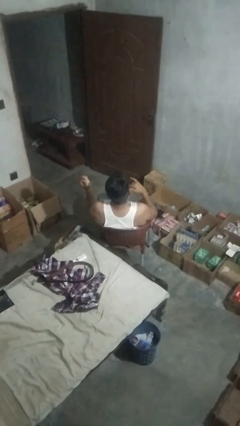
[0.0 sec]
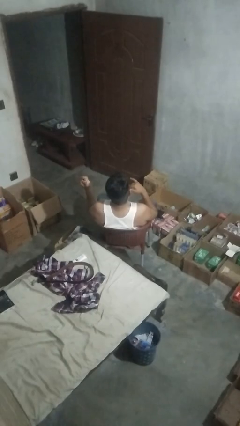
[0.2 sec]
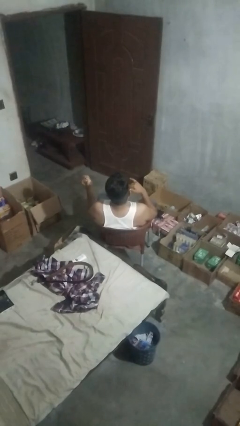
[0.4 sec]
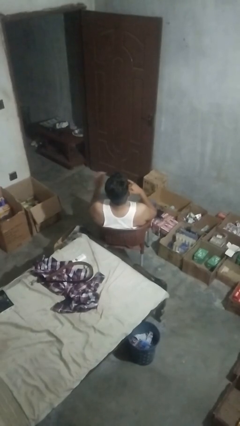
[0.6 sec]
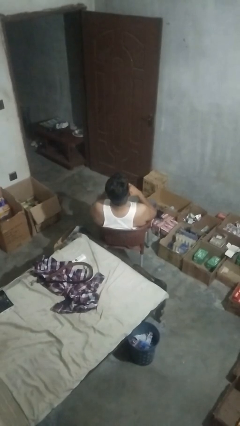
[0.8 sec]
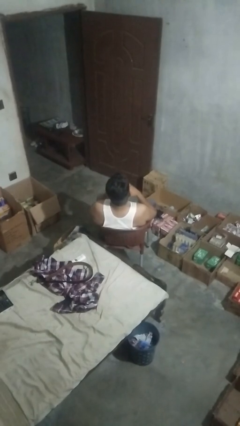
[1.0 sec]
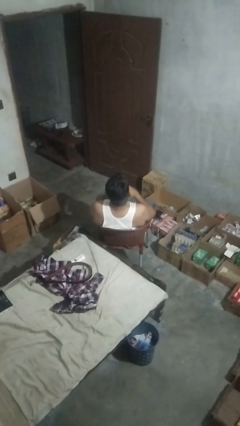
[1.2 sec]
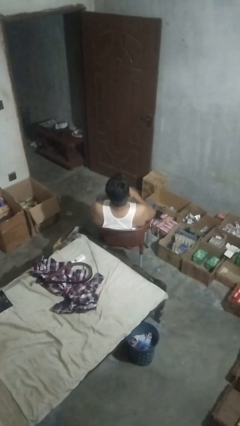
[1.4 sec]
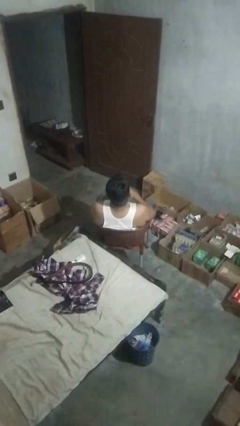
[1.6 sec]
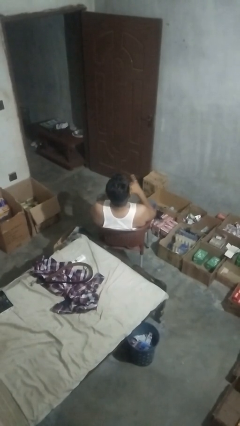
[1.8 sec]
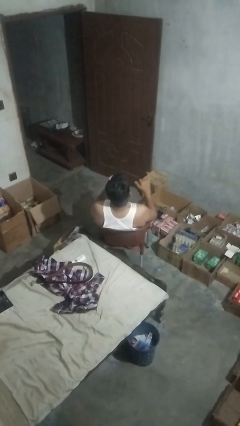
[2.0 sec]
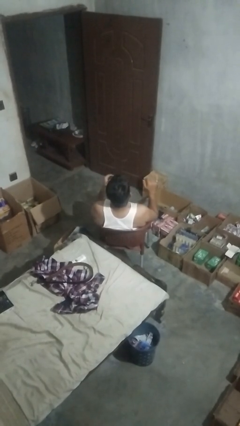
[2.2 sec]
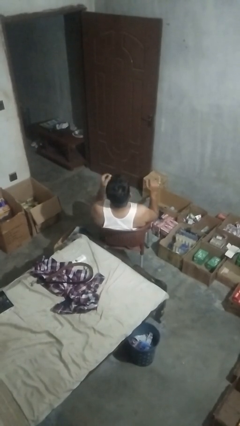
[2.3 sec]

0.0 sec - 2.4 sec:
person puts on ring

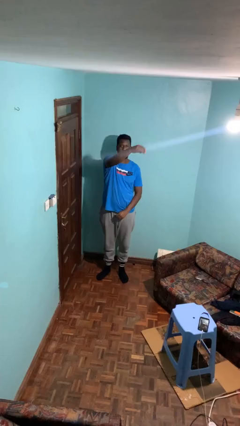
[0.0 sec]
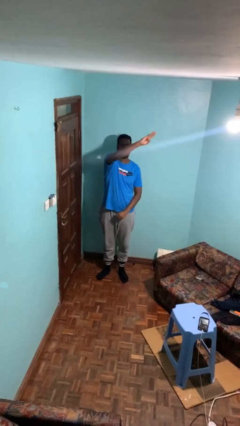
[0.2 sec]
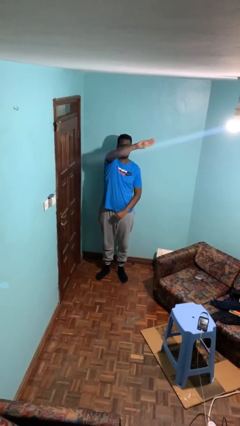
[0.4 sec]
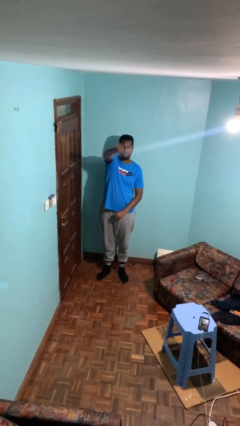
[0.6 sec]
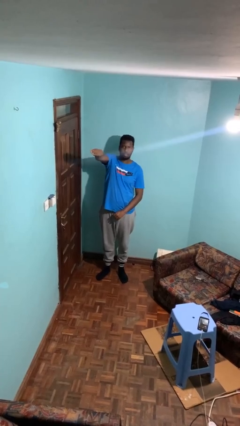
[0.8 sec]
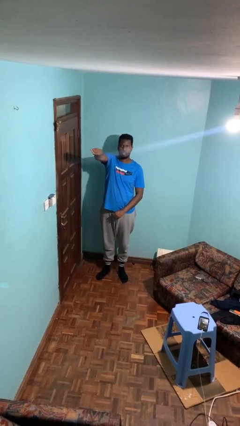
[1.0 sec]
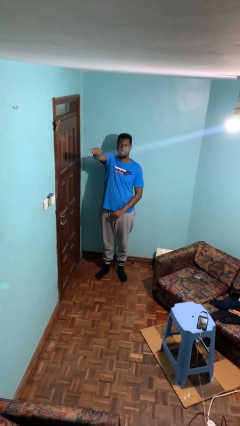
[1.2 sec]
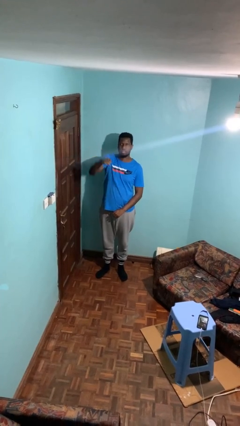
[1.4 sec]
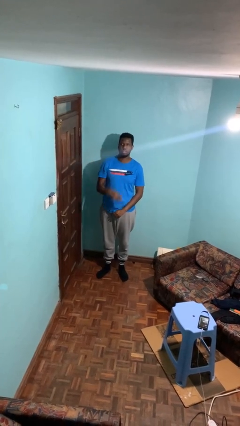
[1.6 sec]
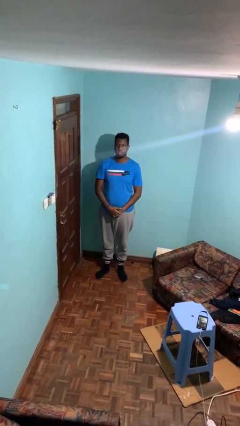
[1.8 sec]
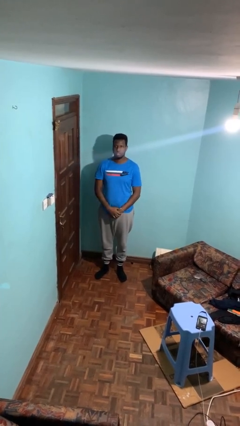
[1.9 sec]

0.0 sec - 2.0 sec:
person gestures swipe right

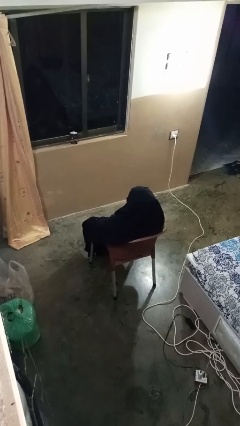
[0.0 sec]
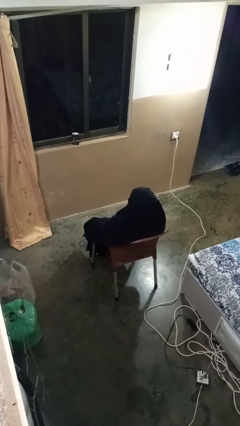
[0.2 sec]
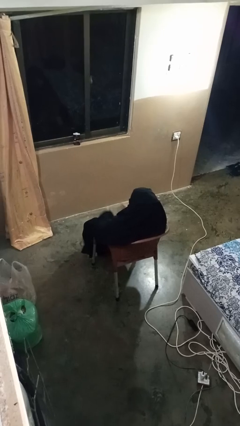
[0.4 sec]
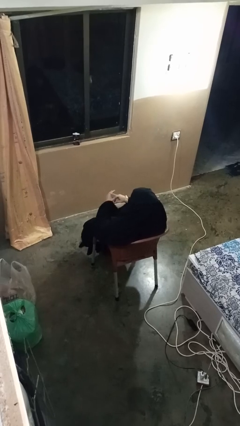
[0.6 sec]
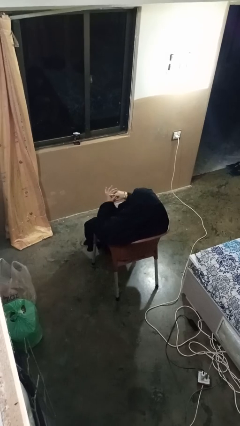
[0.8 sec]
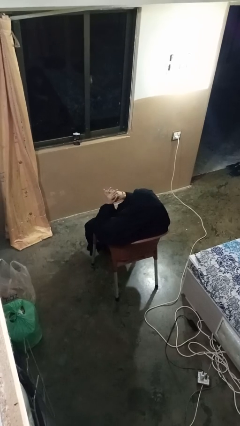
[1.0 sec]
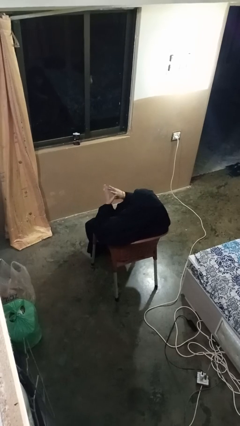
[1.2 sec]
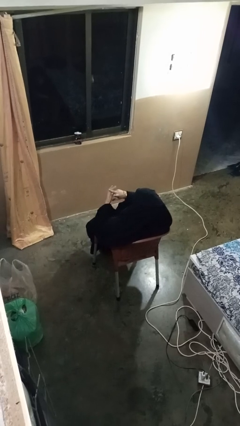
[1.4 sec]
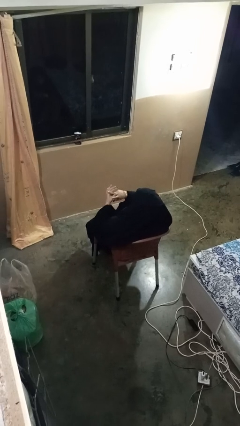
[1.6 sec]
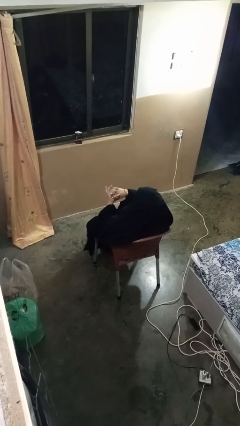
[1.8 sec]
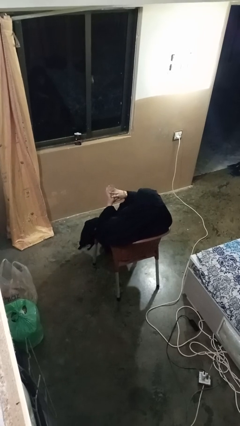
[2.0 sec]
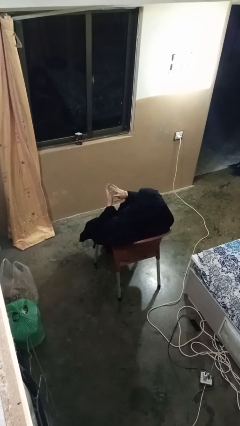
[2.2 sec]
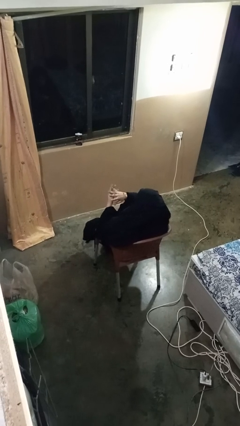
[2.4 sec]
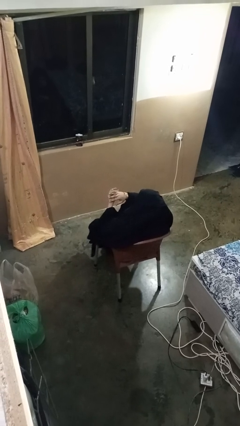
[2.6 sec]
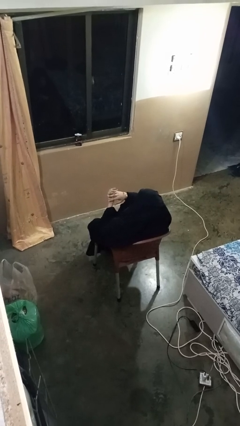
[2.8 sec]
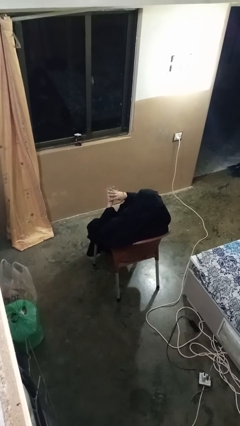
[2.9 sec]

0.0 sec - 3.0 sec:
person cracks knuckles

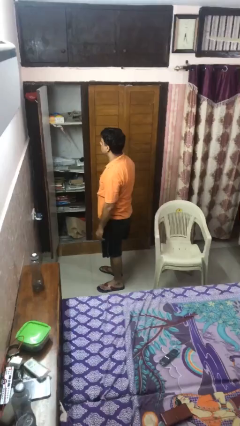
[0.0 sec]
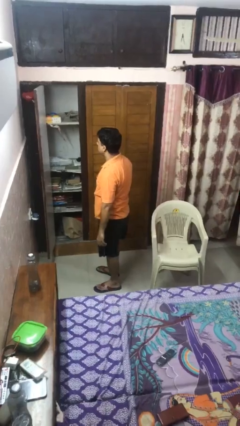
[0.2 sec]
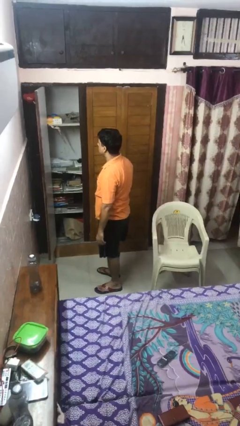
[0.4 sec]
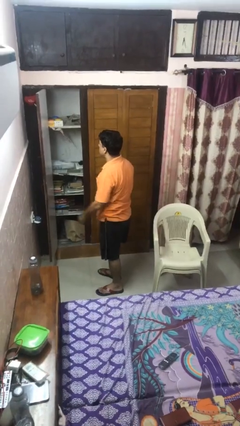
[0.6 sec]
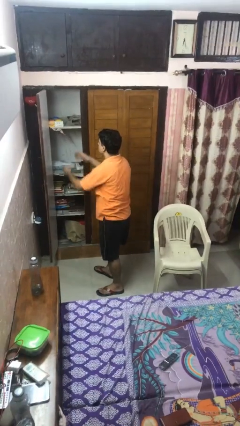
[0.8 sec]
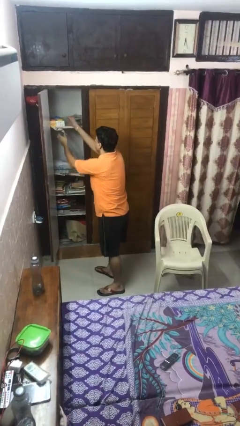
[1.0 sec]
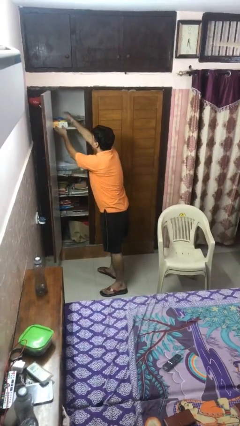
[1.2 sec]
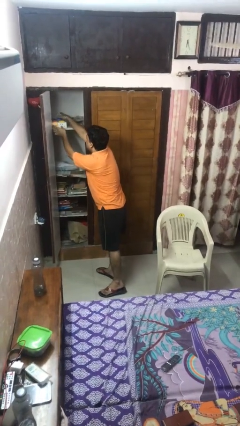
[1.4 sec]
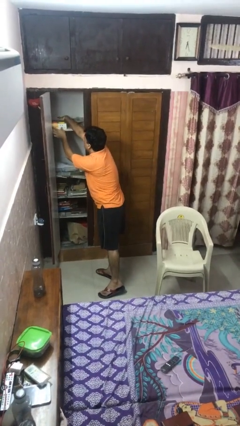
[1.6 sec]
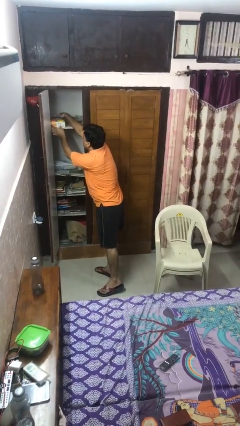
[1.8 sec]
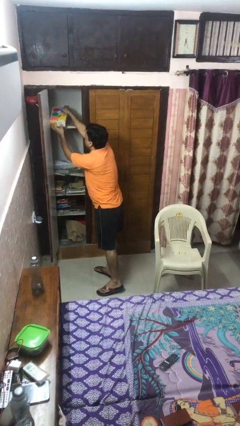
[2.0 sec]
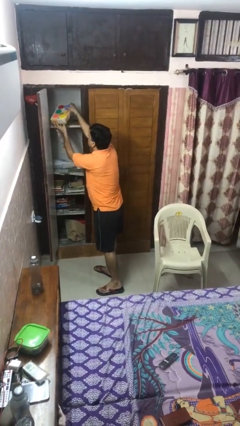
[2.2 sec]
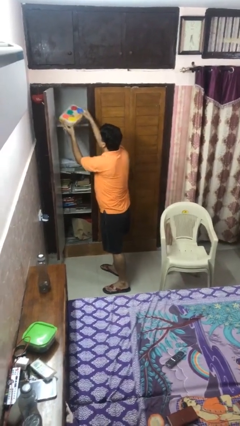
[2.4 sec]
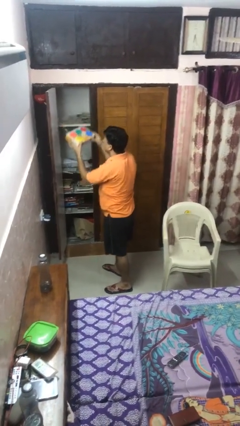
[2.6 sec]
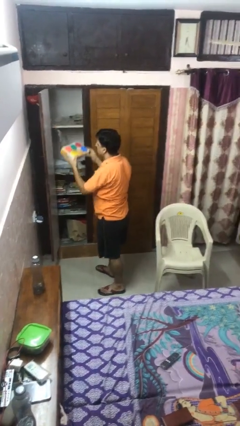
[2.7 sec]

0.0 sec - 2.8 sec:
person picks up object from shelf

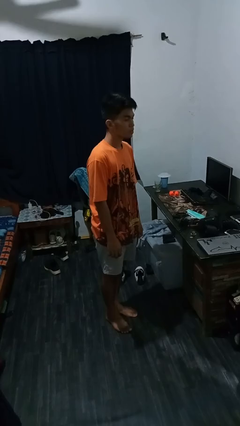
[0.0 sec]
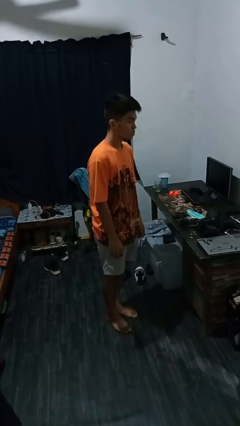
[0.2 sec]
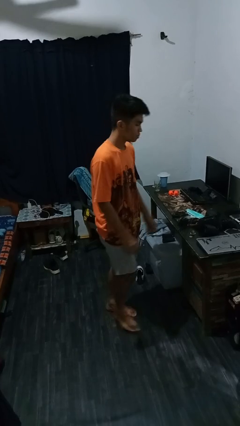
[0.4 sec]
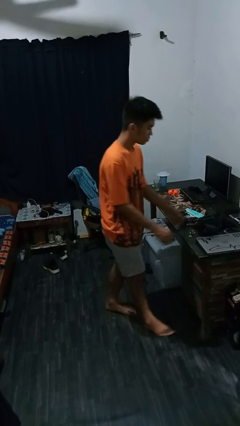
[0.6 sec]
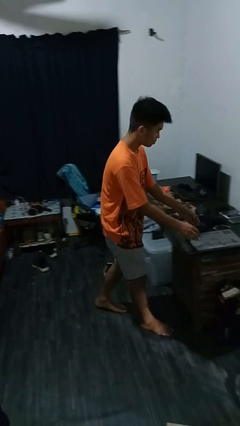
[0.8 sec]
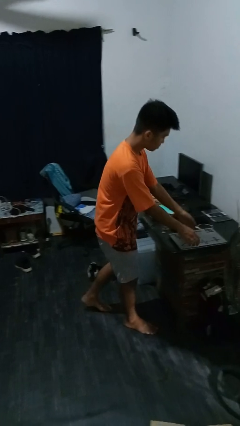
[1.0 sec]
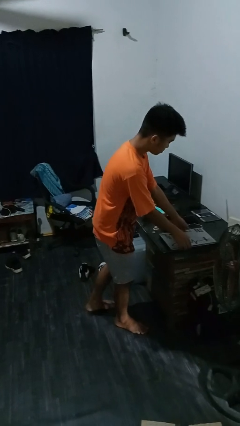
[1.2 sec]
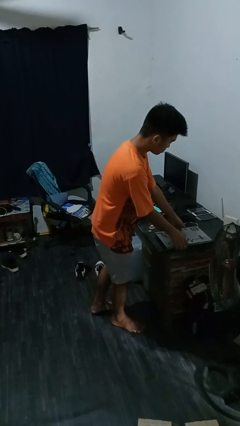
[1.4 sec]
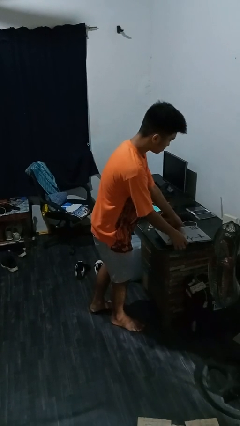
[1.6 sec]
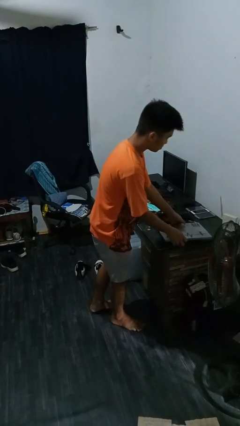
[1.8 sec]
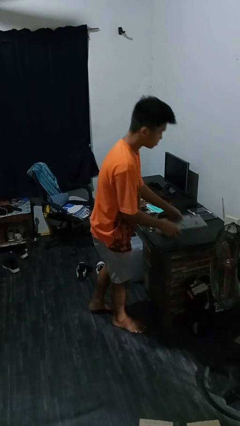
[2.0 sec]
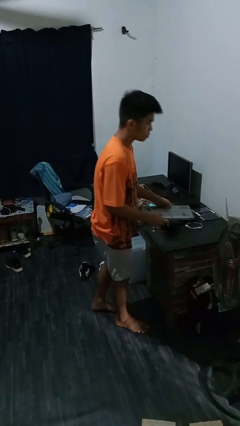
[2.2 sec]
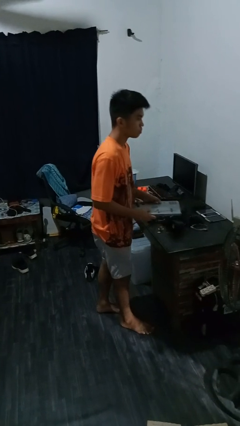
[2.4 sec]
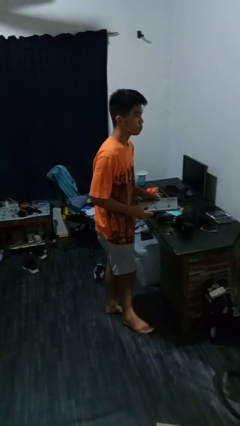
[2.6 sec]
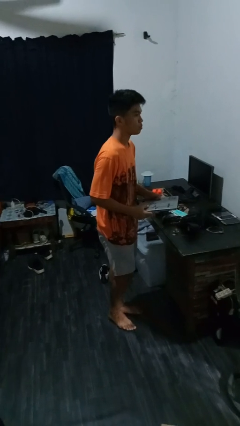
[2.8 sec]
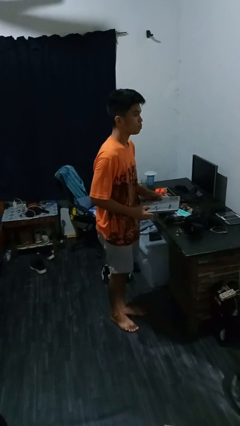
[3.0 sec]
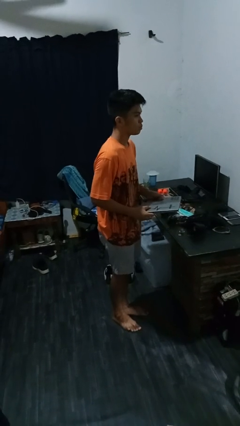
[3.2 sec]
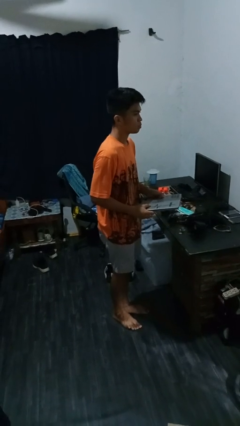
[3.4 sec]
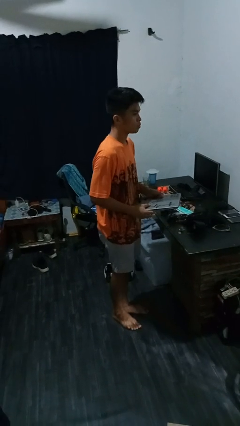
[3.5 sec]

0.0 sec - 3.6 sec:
person picks up object from countertop

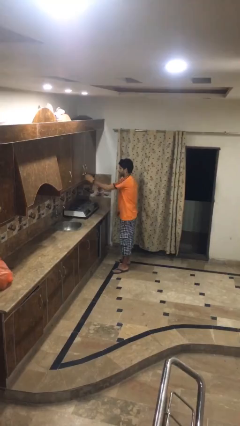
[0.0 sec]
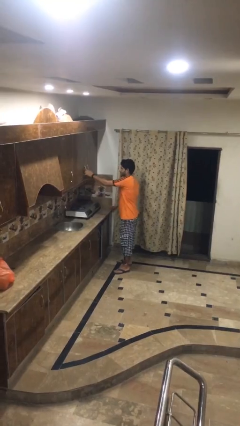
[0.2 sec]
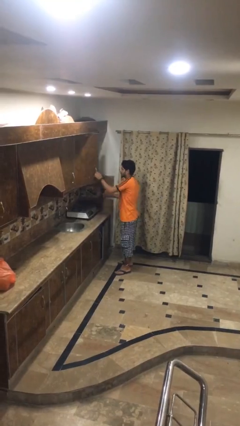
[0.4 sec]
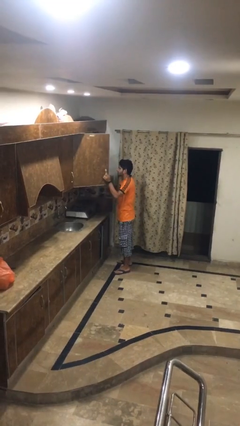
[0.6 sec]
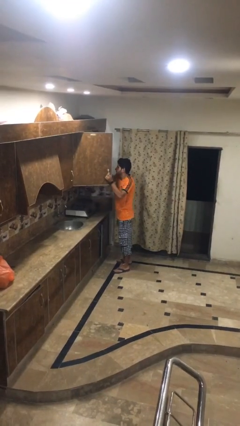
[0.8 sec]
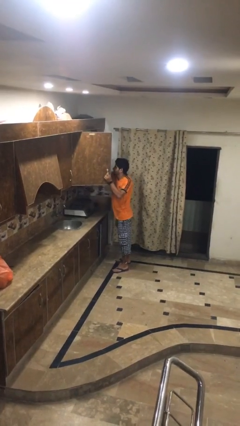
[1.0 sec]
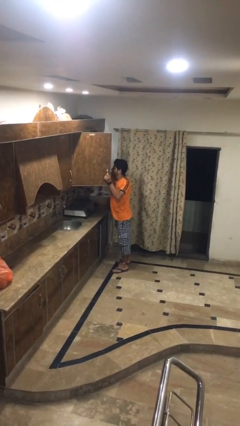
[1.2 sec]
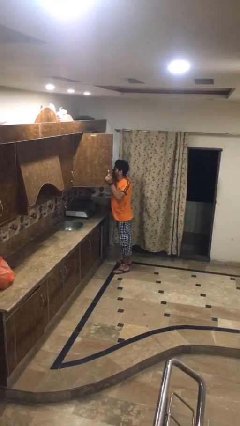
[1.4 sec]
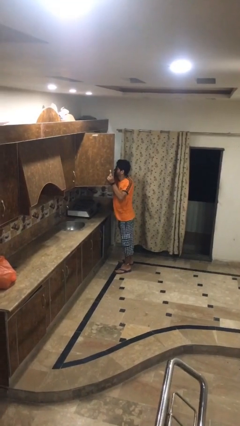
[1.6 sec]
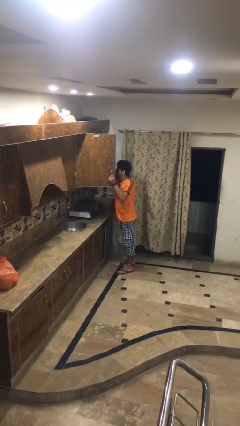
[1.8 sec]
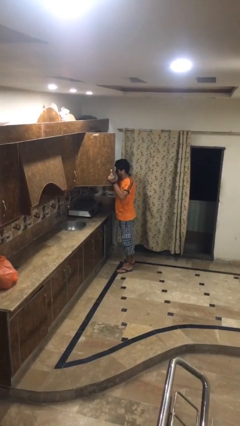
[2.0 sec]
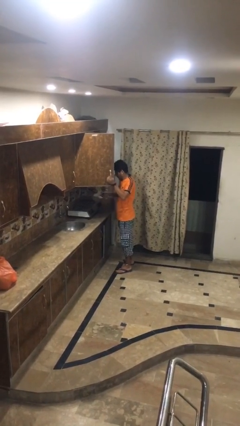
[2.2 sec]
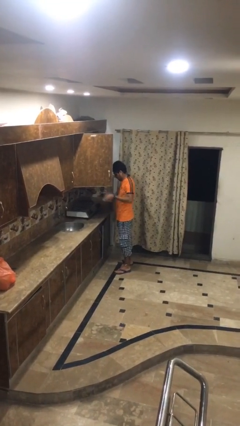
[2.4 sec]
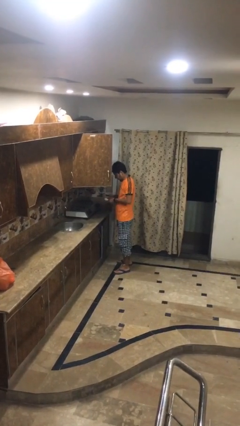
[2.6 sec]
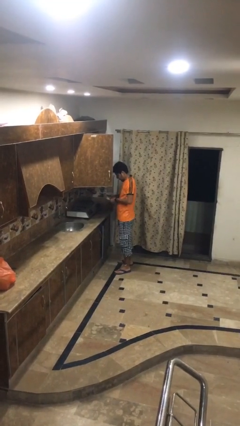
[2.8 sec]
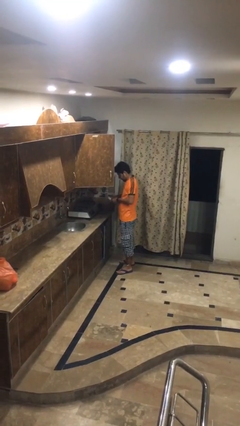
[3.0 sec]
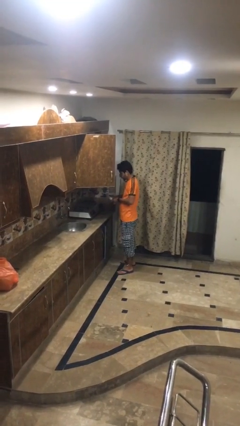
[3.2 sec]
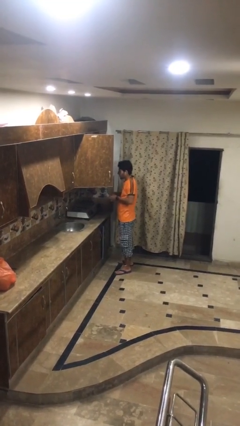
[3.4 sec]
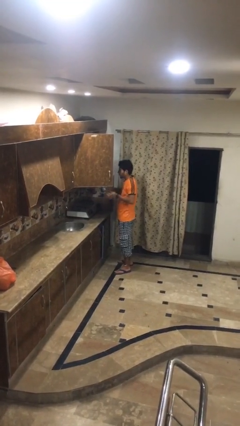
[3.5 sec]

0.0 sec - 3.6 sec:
person takes object from kitchen drawer
